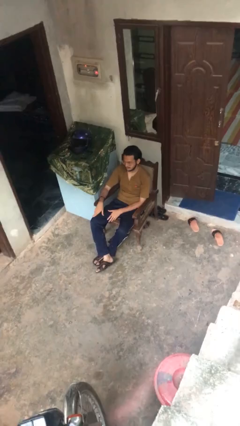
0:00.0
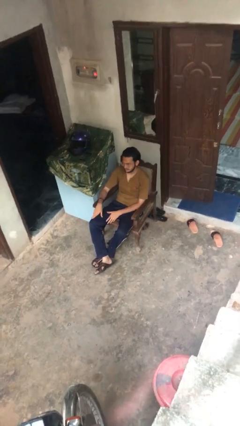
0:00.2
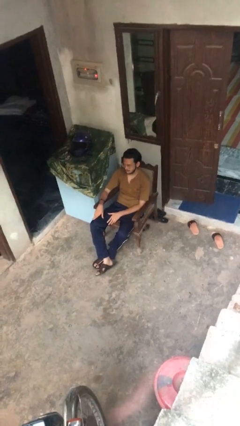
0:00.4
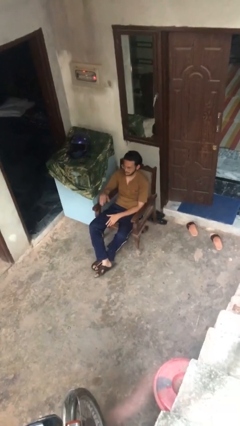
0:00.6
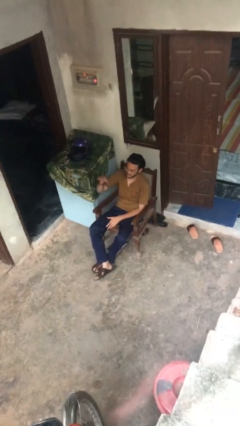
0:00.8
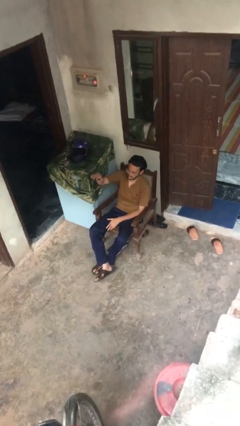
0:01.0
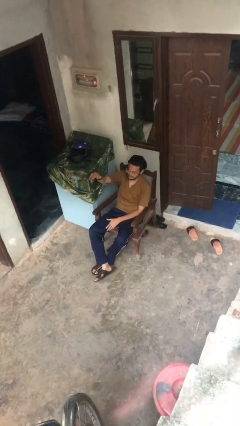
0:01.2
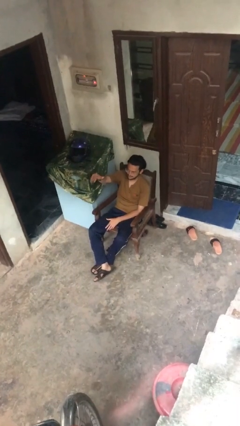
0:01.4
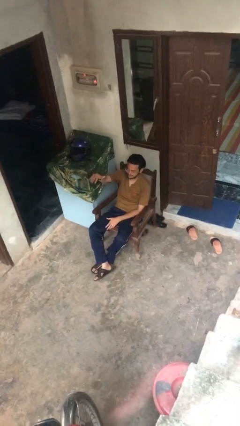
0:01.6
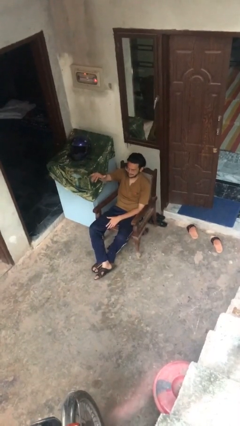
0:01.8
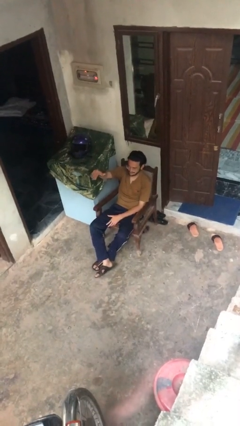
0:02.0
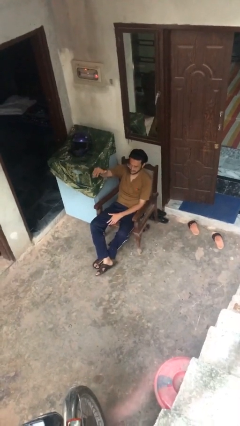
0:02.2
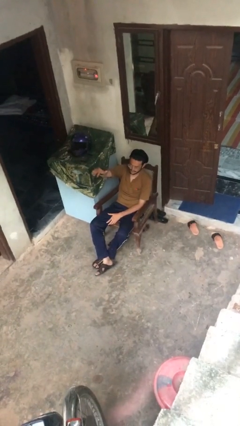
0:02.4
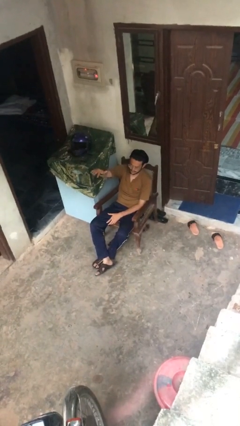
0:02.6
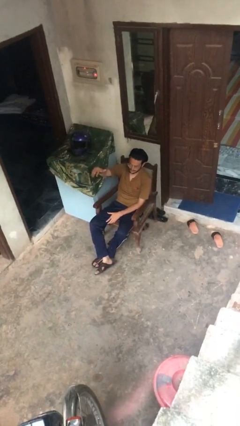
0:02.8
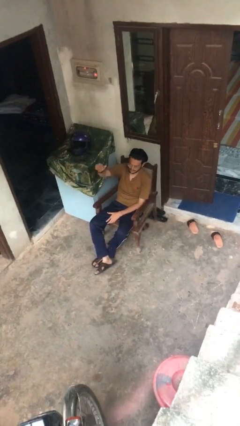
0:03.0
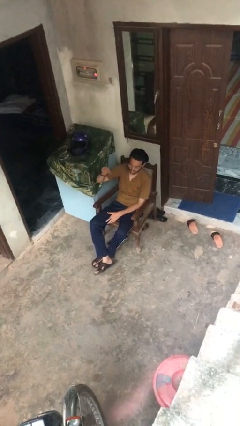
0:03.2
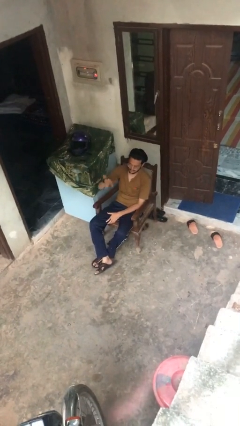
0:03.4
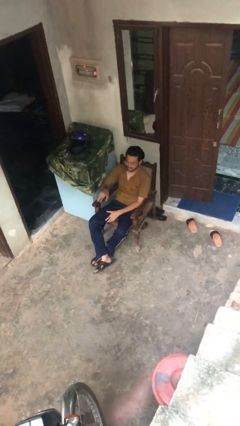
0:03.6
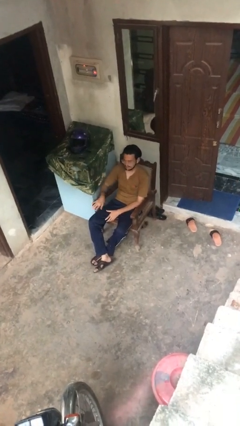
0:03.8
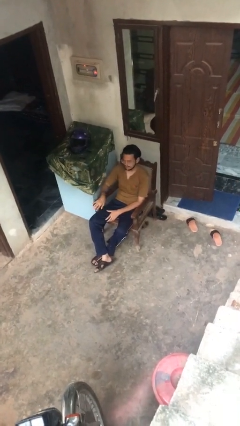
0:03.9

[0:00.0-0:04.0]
person gestures come here

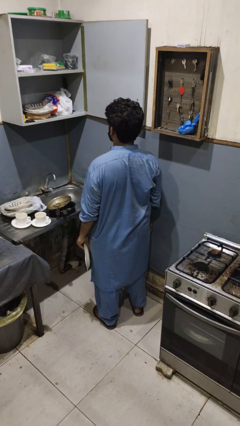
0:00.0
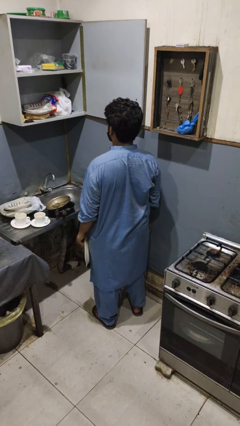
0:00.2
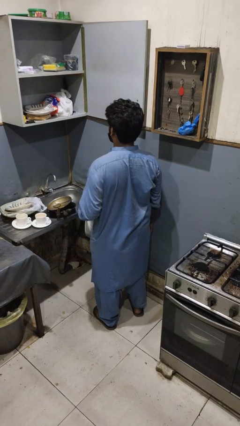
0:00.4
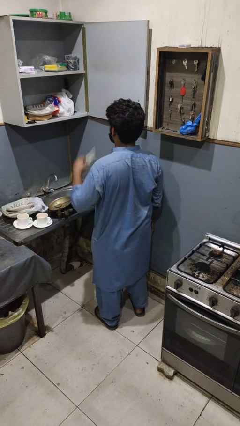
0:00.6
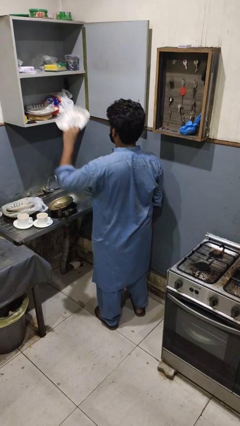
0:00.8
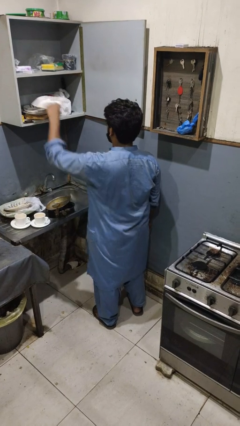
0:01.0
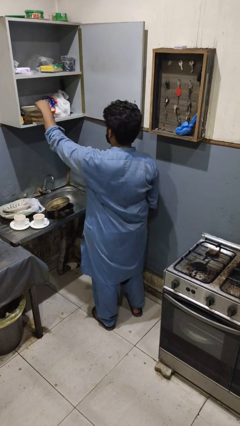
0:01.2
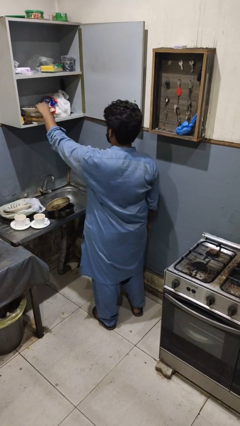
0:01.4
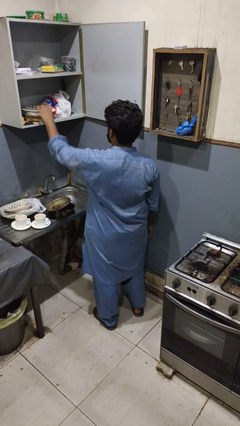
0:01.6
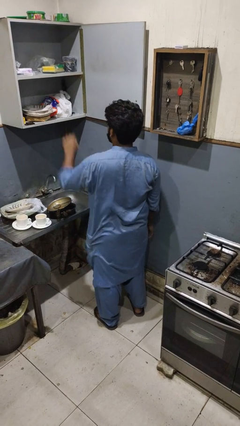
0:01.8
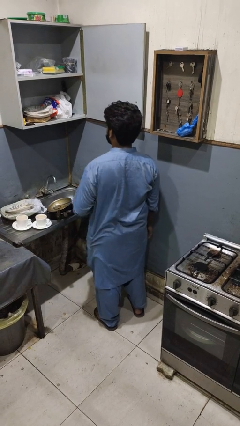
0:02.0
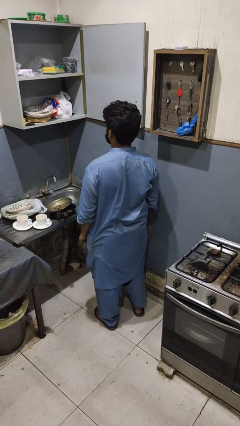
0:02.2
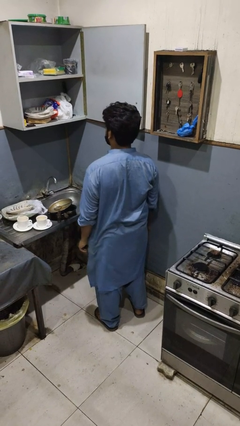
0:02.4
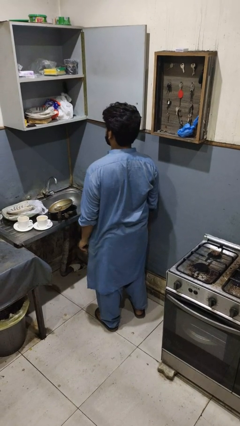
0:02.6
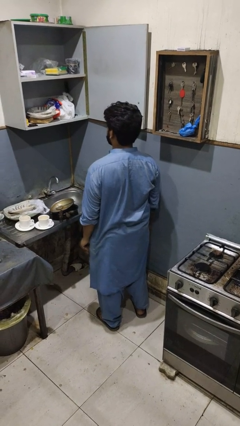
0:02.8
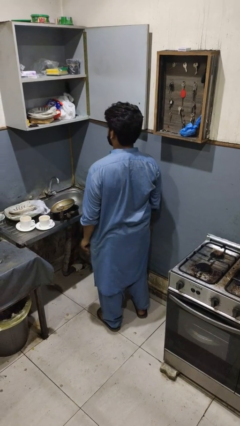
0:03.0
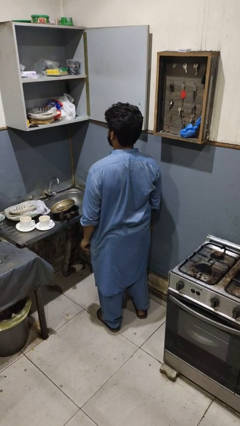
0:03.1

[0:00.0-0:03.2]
person puts object in cabinet

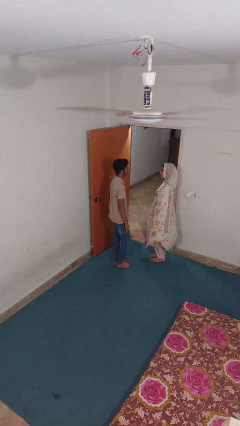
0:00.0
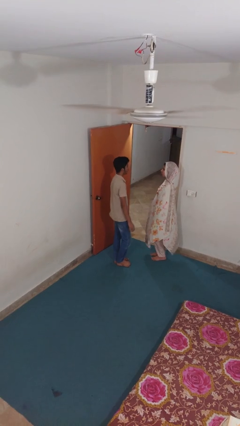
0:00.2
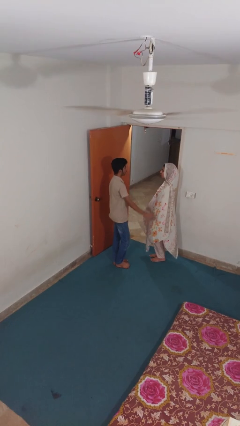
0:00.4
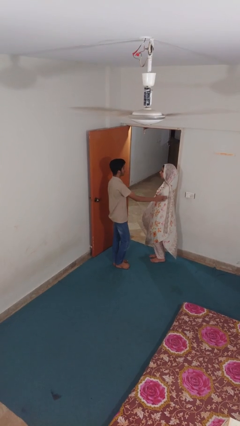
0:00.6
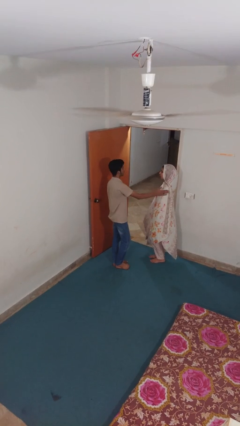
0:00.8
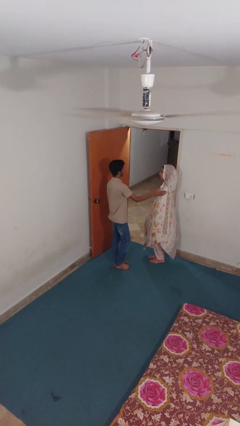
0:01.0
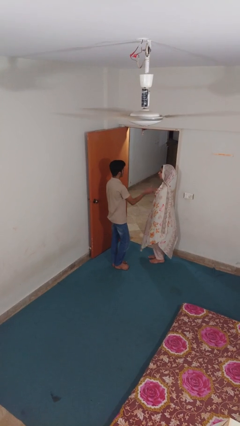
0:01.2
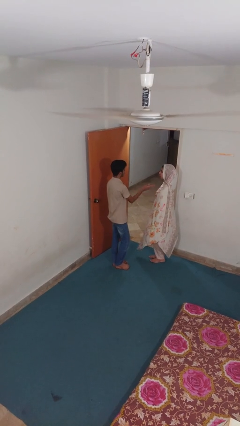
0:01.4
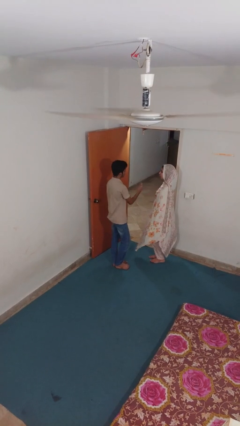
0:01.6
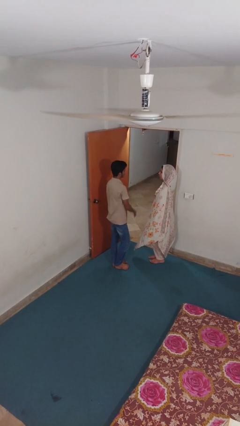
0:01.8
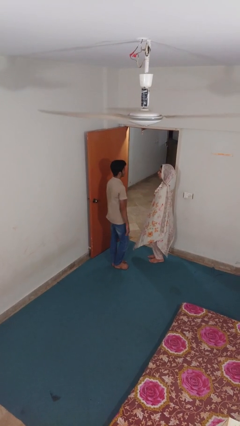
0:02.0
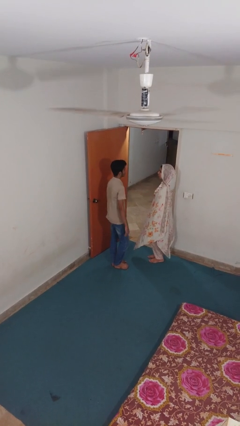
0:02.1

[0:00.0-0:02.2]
person shoves person

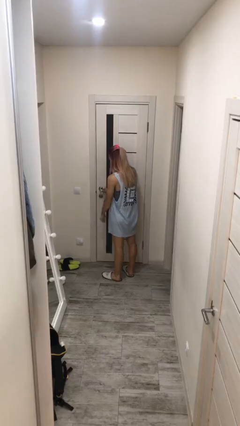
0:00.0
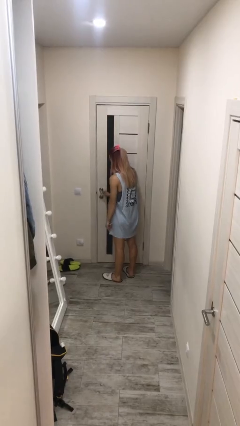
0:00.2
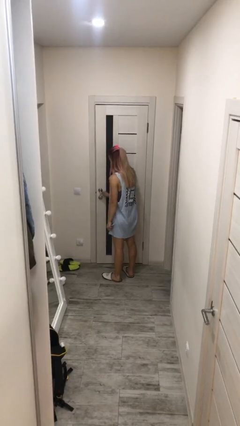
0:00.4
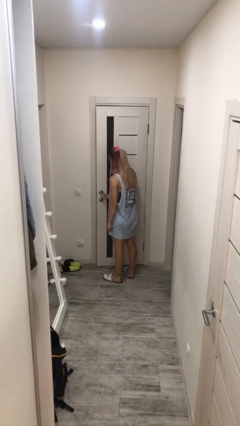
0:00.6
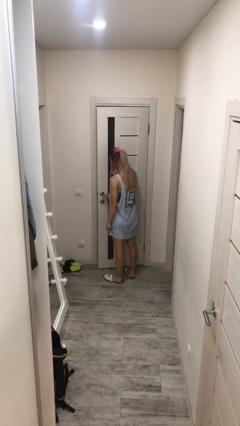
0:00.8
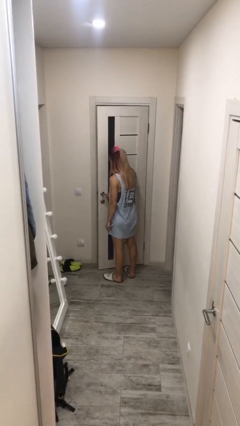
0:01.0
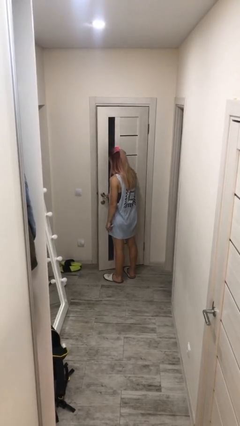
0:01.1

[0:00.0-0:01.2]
person opens facility door

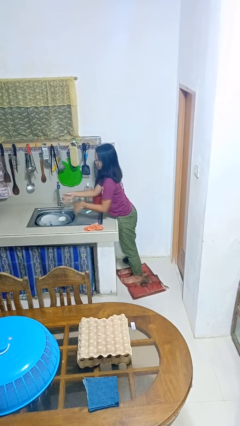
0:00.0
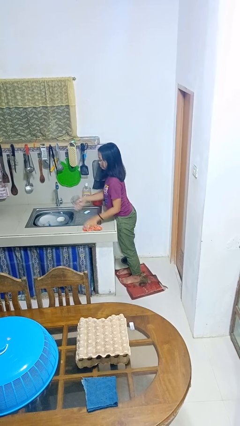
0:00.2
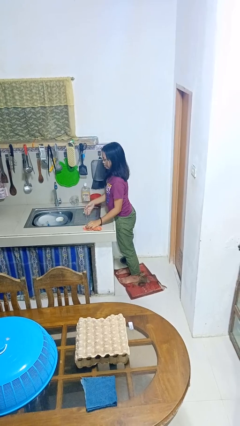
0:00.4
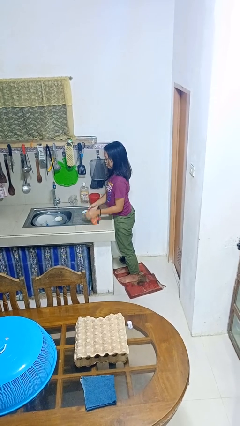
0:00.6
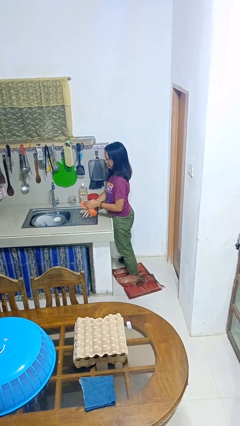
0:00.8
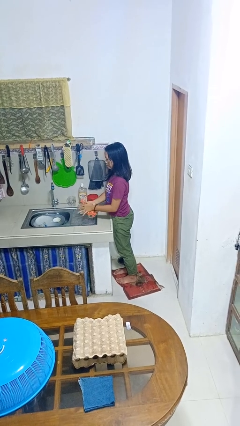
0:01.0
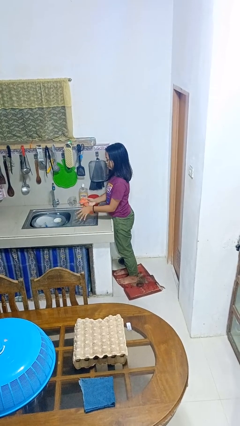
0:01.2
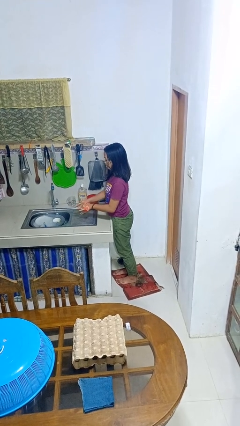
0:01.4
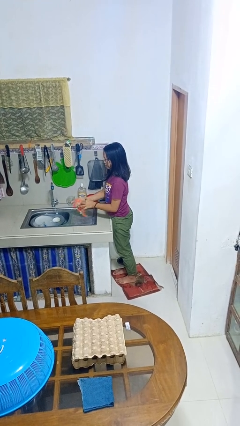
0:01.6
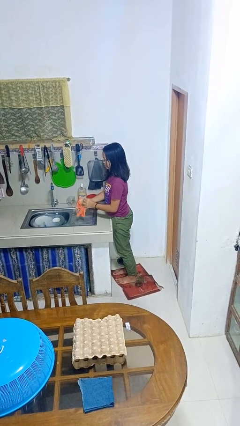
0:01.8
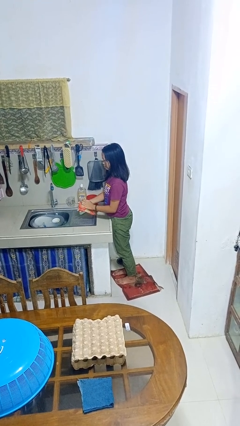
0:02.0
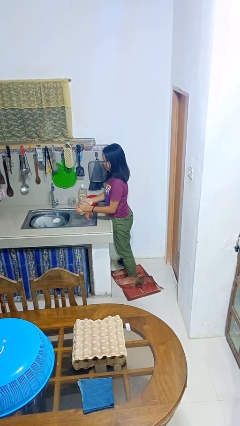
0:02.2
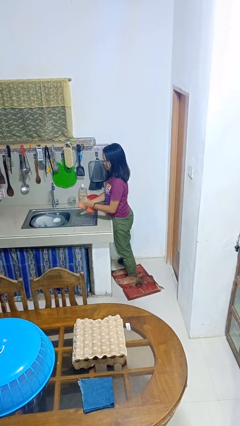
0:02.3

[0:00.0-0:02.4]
person dries hands with towel

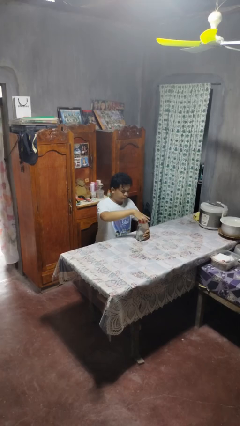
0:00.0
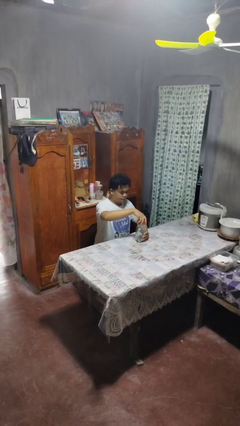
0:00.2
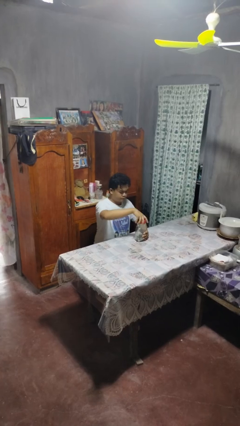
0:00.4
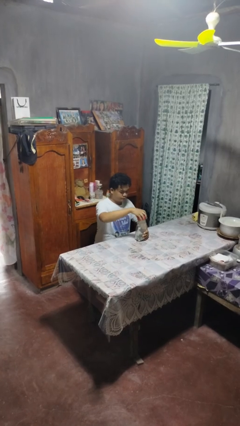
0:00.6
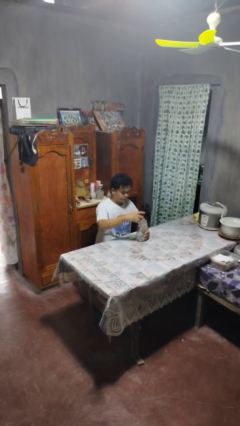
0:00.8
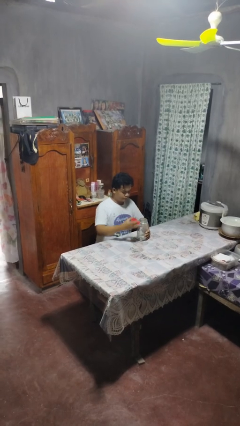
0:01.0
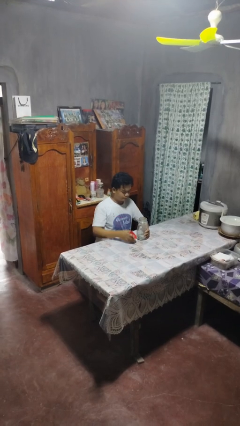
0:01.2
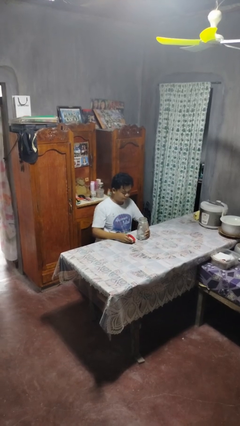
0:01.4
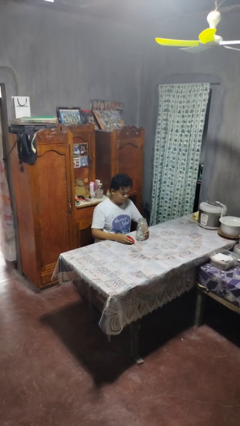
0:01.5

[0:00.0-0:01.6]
person opens jar

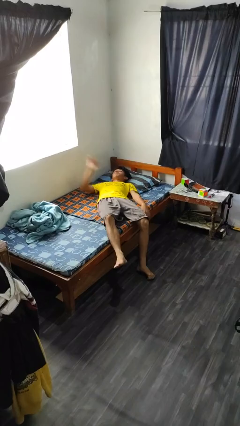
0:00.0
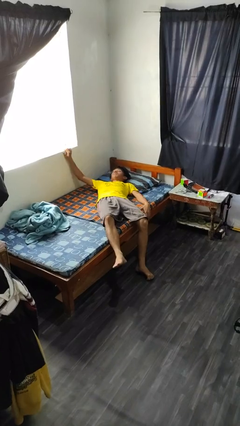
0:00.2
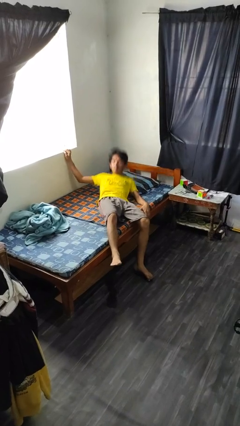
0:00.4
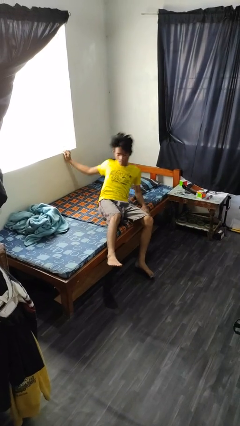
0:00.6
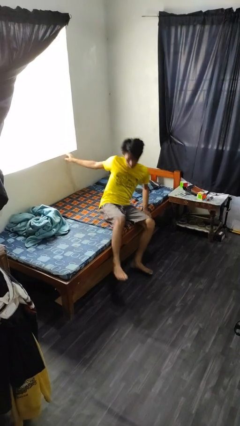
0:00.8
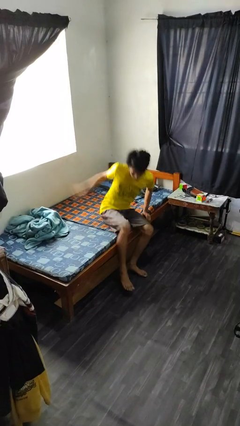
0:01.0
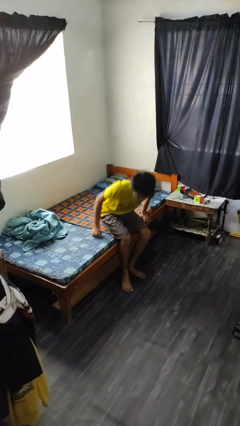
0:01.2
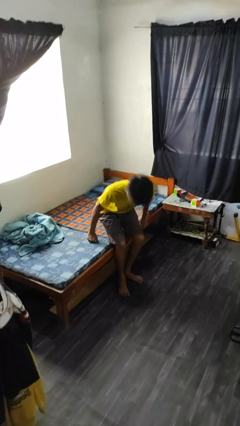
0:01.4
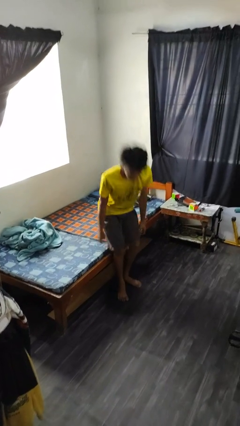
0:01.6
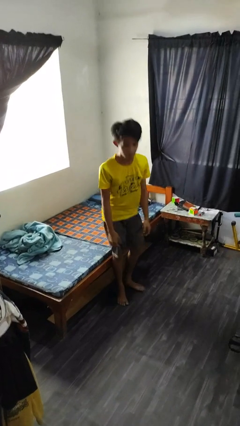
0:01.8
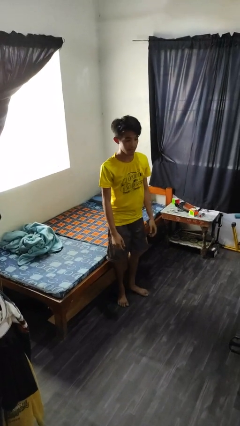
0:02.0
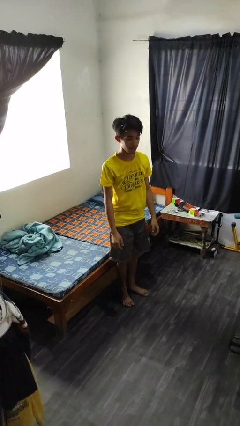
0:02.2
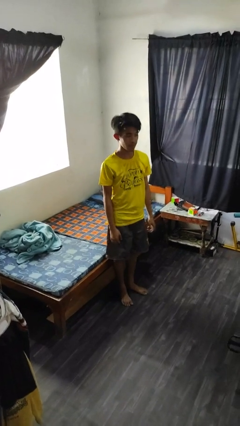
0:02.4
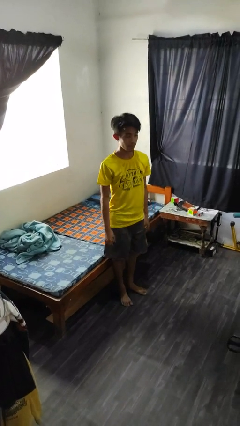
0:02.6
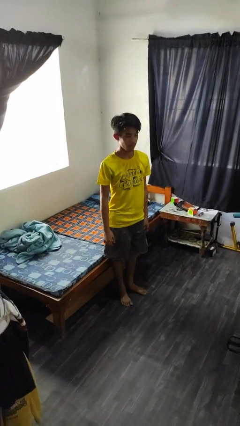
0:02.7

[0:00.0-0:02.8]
person stands up
